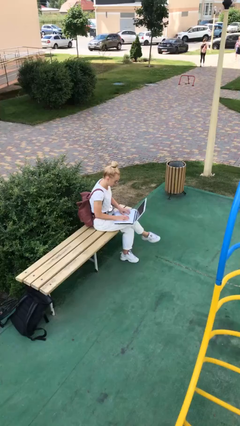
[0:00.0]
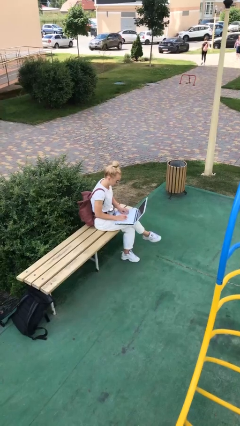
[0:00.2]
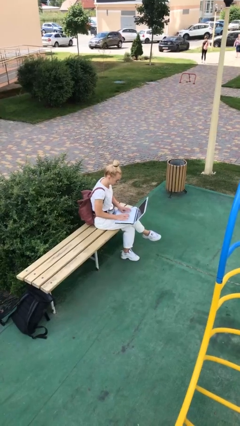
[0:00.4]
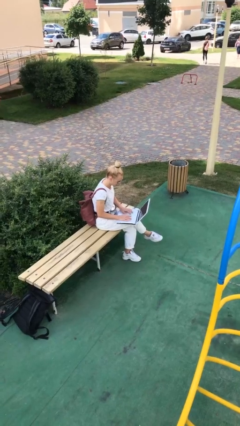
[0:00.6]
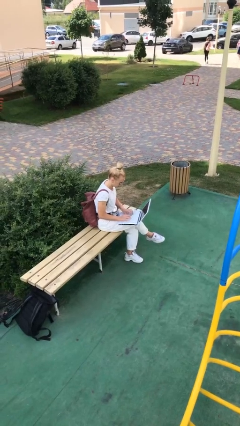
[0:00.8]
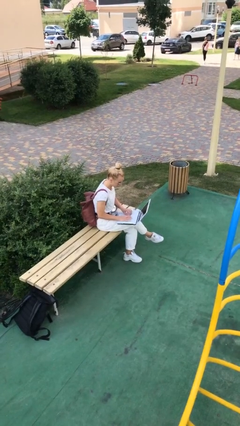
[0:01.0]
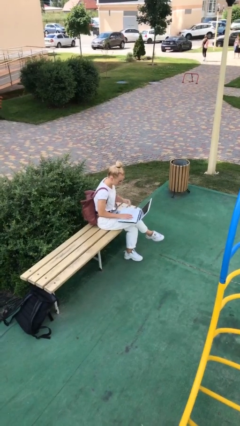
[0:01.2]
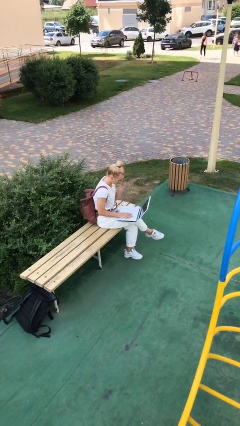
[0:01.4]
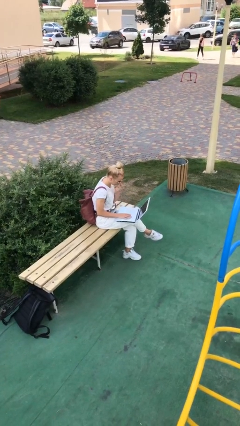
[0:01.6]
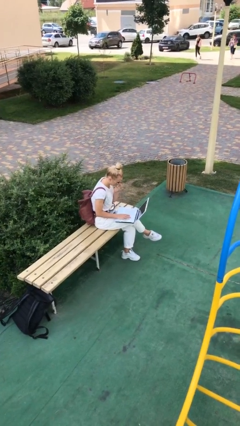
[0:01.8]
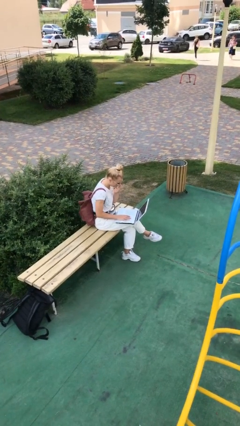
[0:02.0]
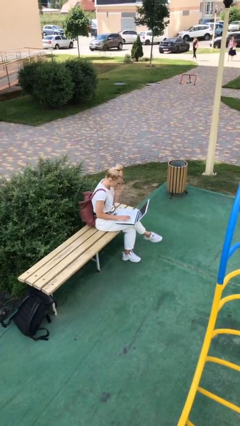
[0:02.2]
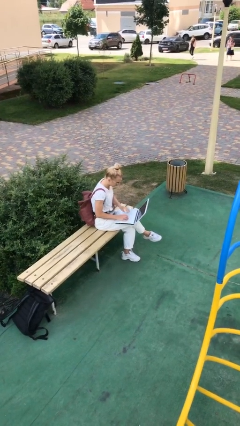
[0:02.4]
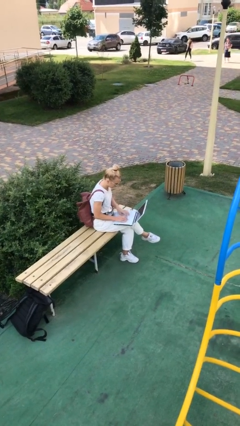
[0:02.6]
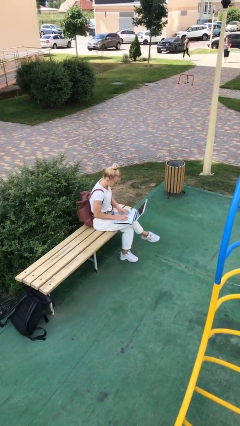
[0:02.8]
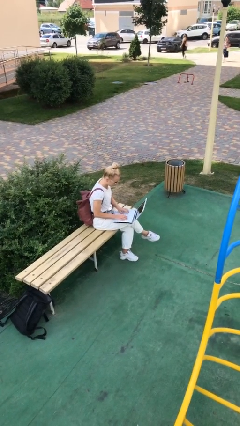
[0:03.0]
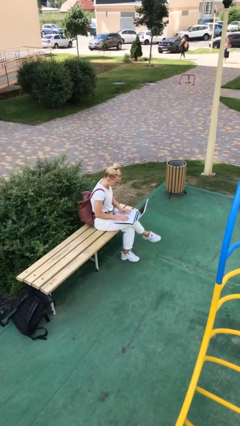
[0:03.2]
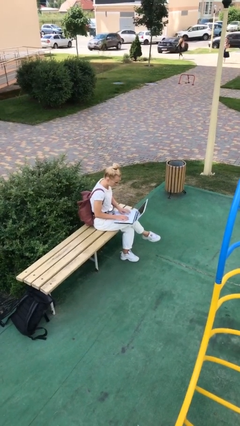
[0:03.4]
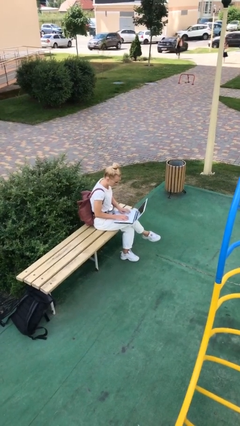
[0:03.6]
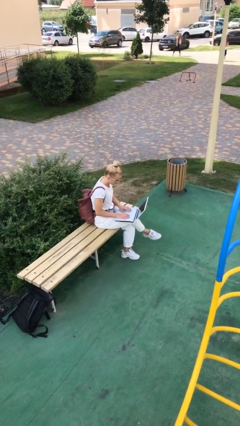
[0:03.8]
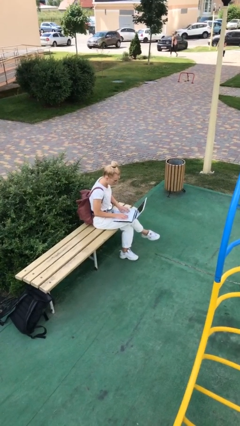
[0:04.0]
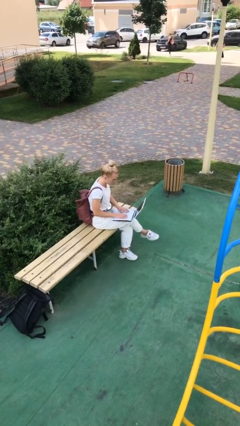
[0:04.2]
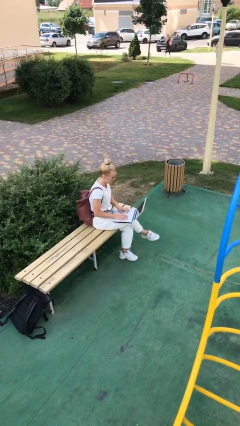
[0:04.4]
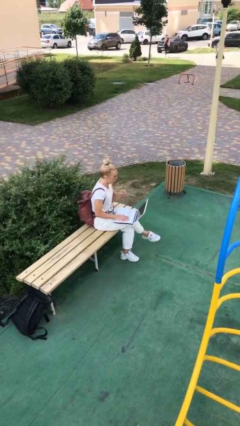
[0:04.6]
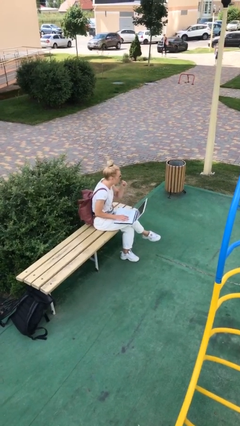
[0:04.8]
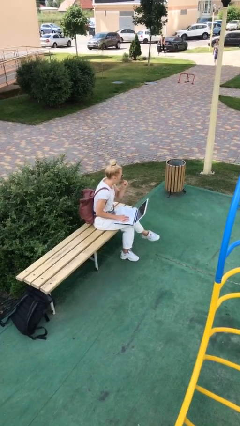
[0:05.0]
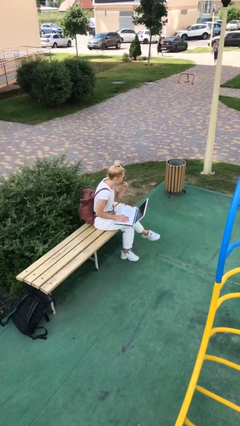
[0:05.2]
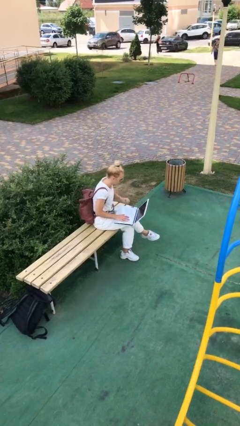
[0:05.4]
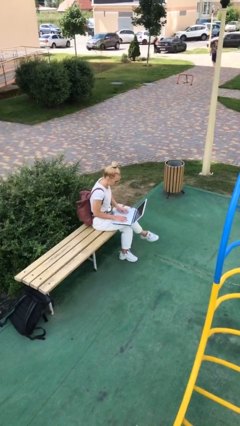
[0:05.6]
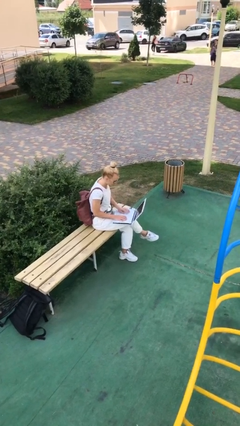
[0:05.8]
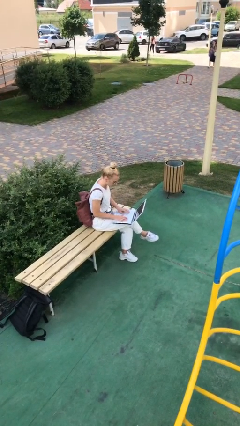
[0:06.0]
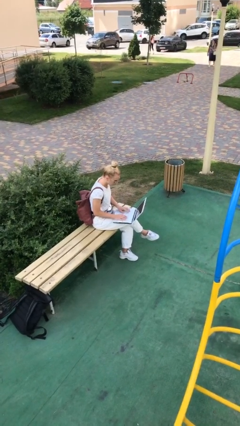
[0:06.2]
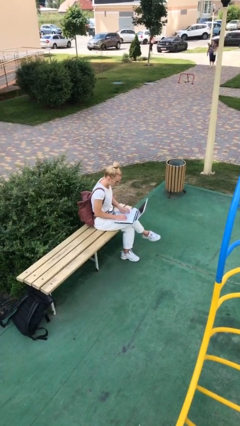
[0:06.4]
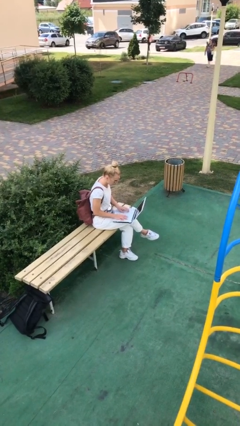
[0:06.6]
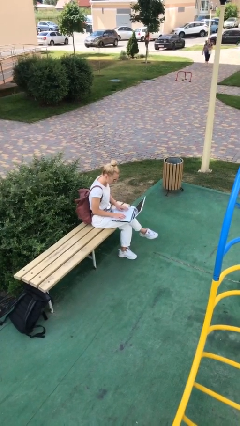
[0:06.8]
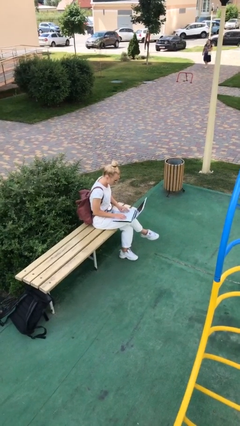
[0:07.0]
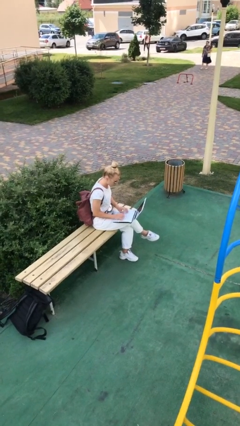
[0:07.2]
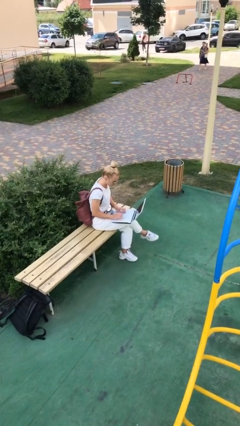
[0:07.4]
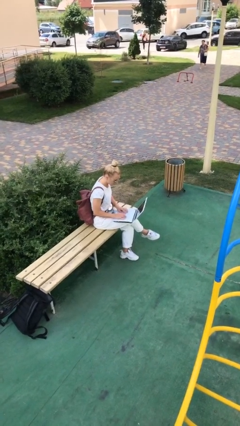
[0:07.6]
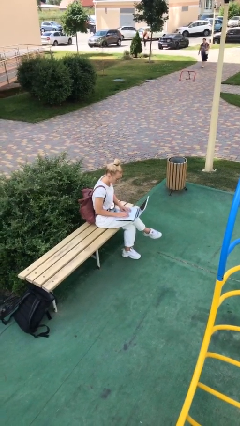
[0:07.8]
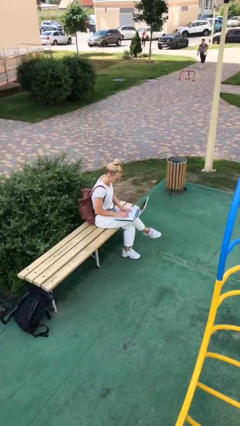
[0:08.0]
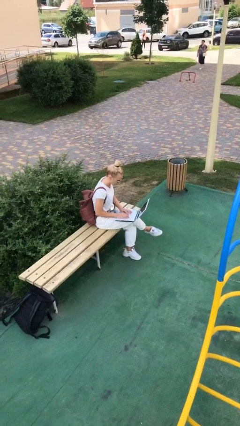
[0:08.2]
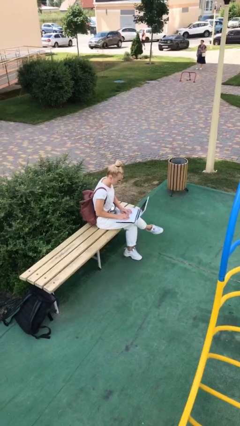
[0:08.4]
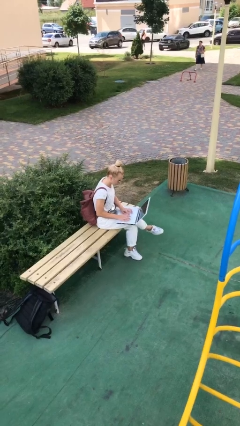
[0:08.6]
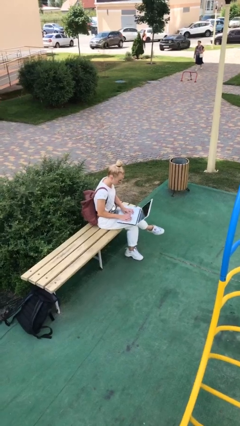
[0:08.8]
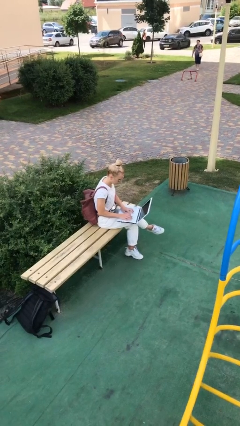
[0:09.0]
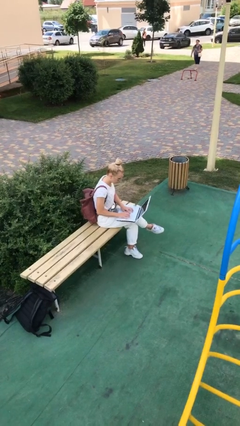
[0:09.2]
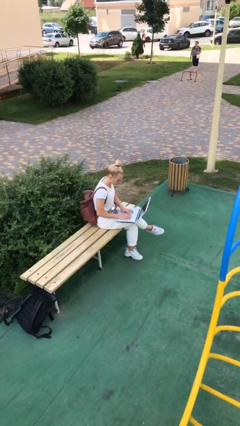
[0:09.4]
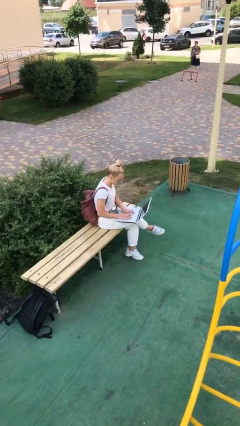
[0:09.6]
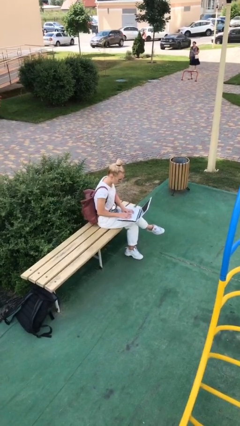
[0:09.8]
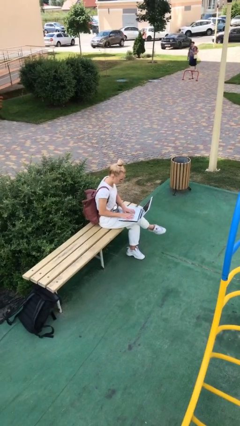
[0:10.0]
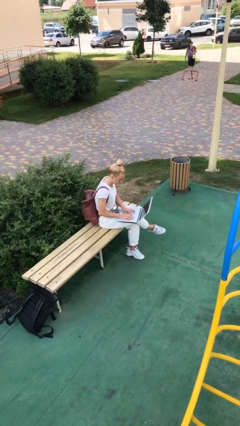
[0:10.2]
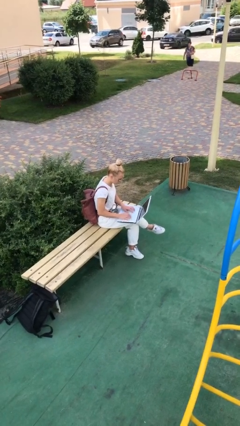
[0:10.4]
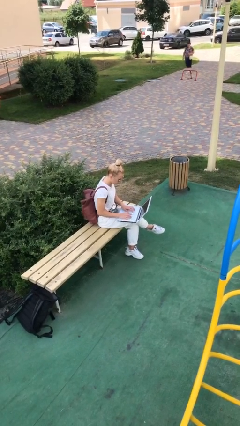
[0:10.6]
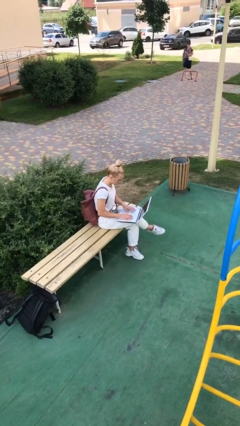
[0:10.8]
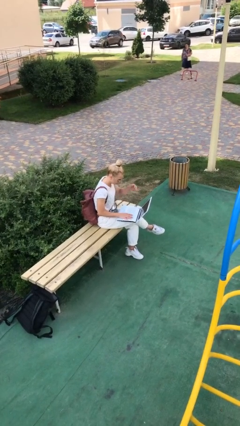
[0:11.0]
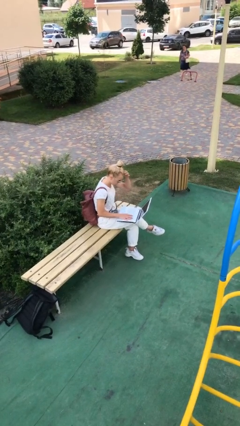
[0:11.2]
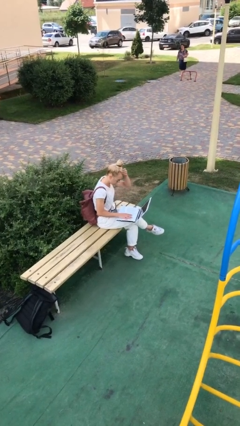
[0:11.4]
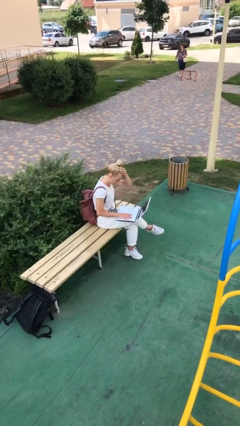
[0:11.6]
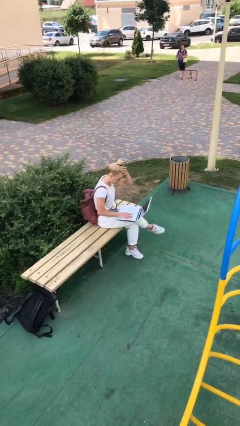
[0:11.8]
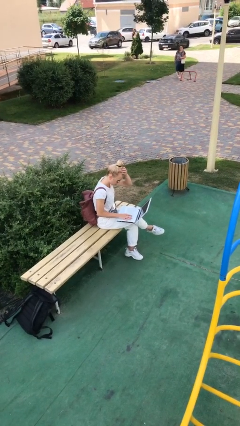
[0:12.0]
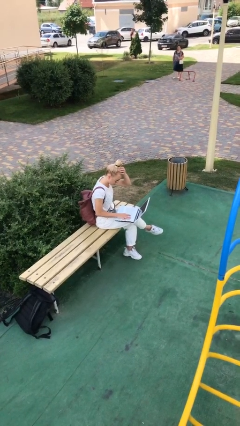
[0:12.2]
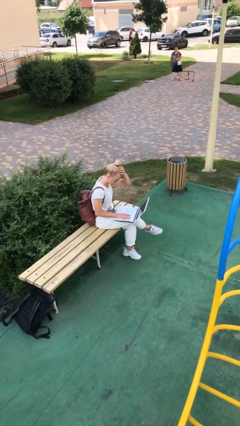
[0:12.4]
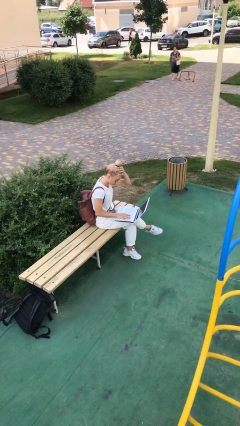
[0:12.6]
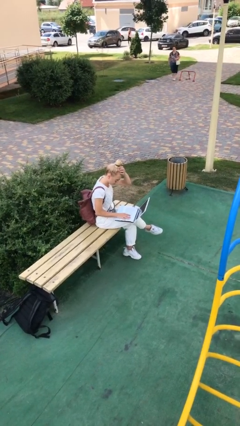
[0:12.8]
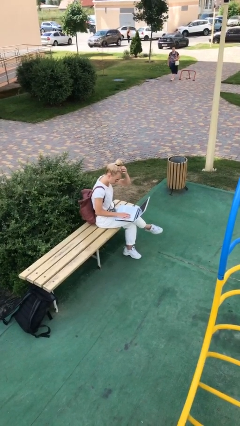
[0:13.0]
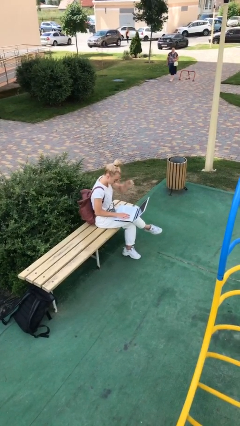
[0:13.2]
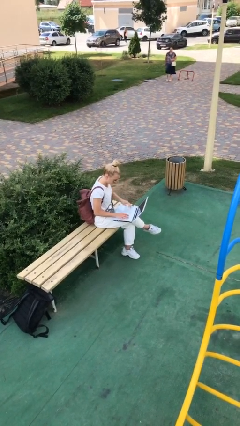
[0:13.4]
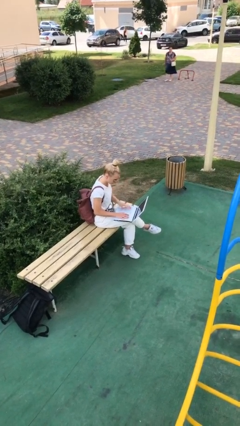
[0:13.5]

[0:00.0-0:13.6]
person interacts with laptop

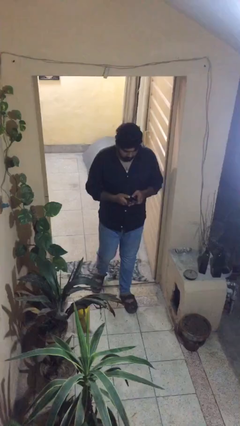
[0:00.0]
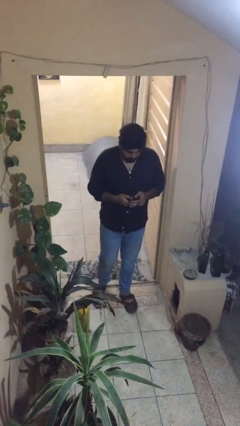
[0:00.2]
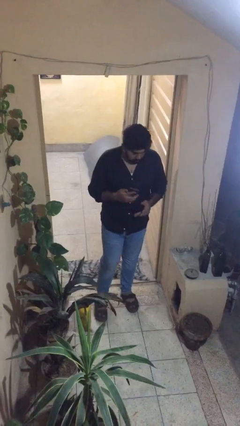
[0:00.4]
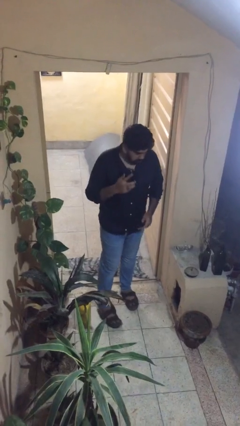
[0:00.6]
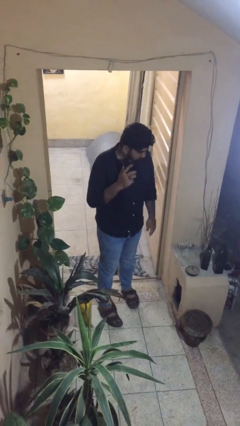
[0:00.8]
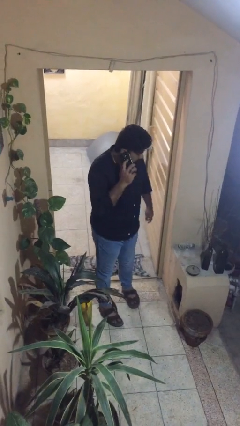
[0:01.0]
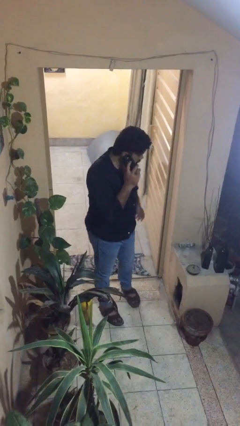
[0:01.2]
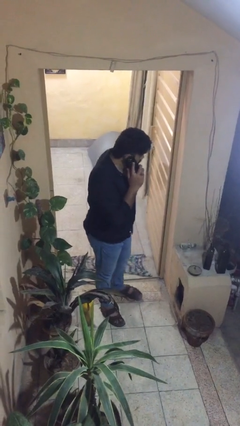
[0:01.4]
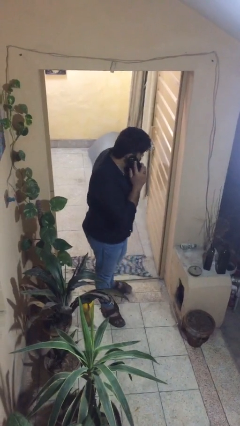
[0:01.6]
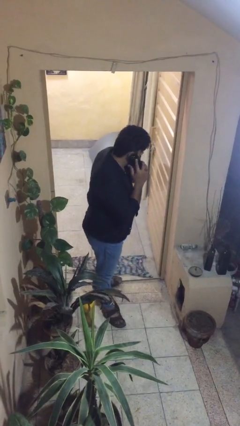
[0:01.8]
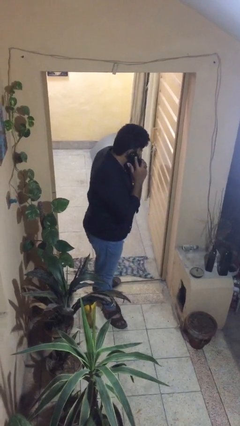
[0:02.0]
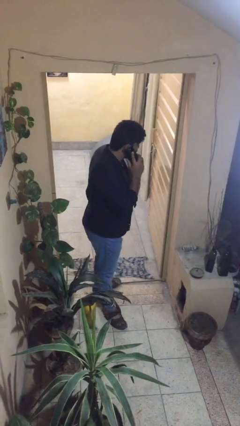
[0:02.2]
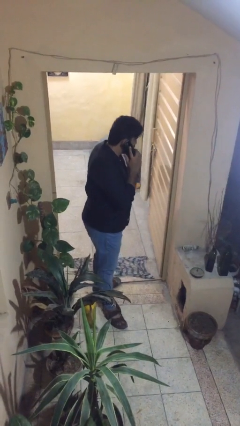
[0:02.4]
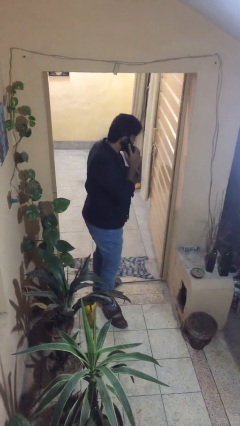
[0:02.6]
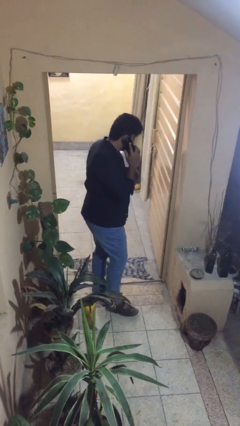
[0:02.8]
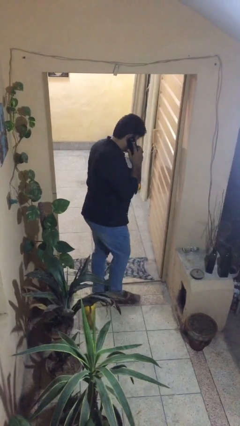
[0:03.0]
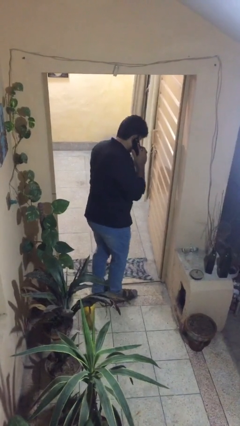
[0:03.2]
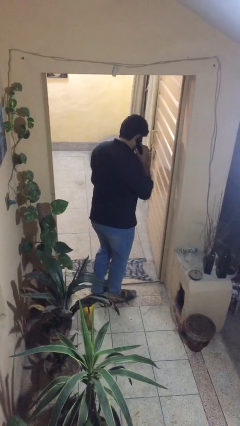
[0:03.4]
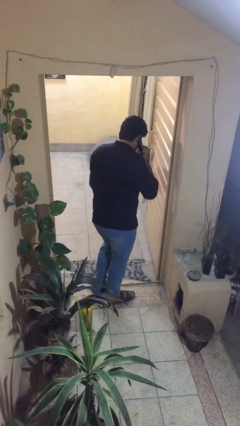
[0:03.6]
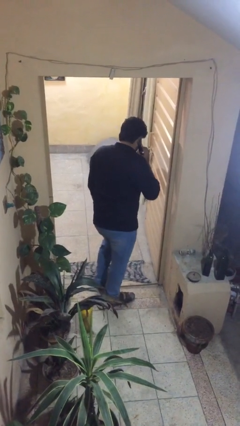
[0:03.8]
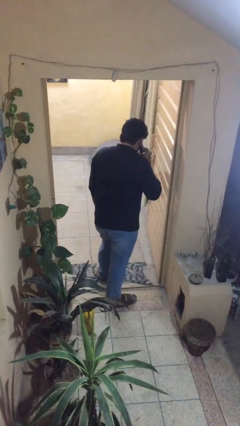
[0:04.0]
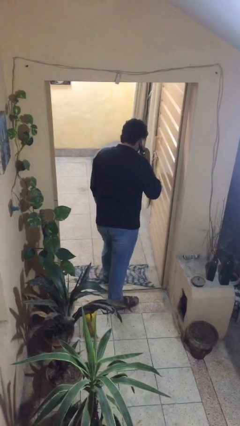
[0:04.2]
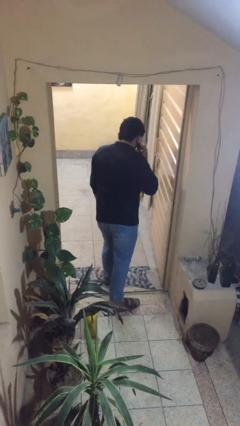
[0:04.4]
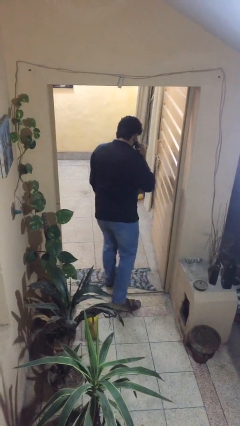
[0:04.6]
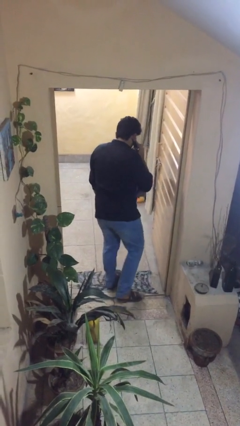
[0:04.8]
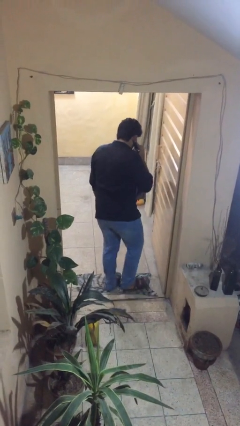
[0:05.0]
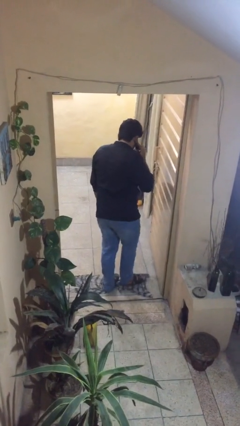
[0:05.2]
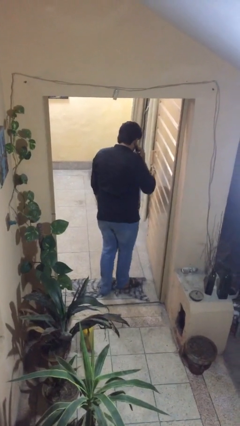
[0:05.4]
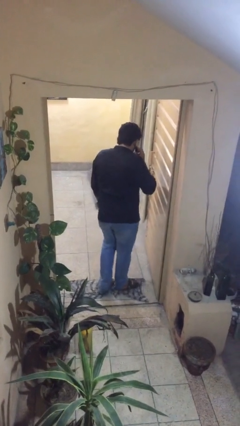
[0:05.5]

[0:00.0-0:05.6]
person talks on phone
